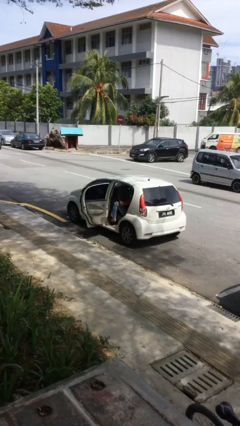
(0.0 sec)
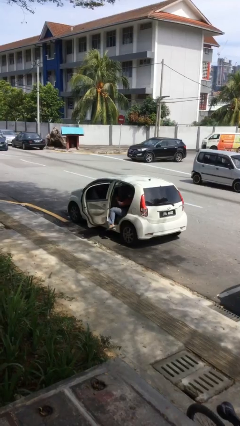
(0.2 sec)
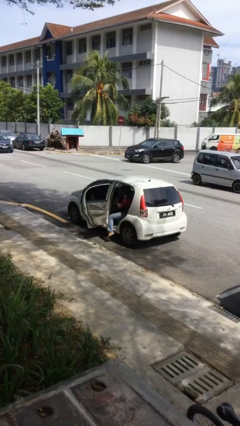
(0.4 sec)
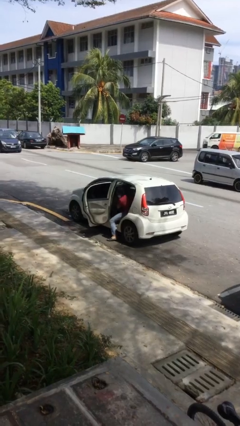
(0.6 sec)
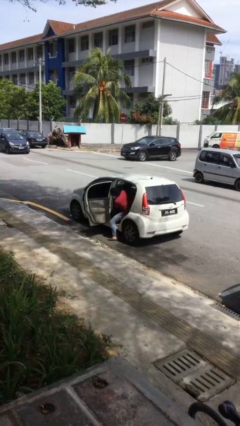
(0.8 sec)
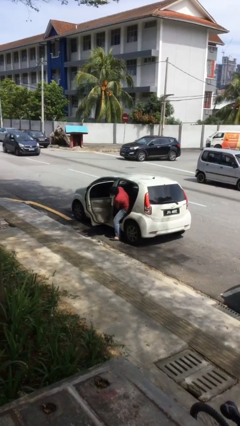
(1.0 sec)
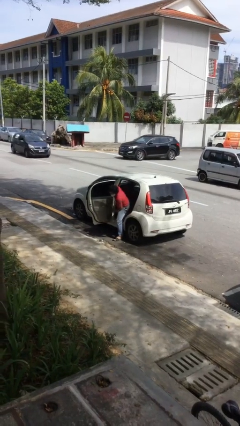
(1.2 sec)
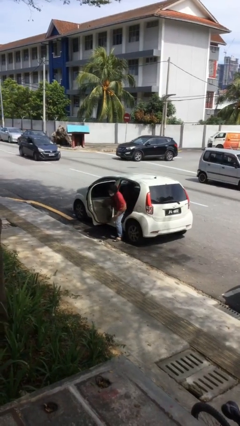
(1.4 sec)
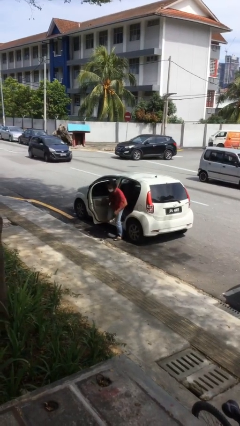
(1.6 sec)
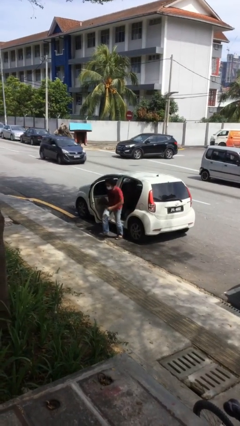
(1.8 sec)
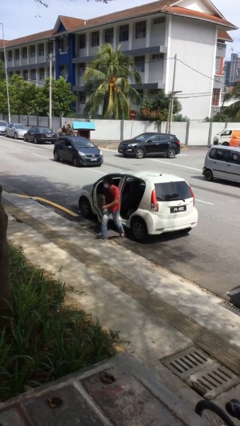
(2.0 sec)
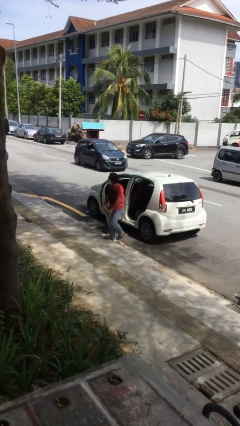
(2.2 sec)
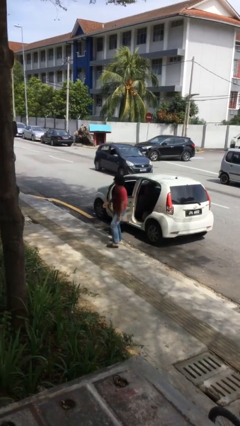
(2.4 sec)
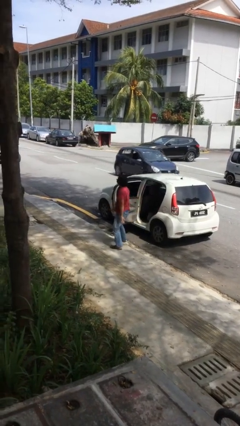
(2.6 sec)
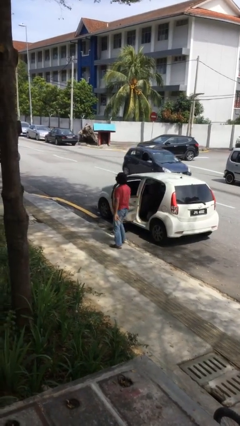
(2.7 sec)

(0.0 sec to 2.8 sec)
person exits car

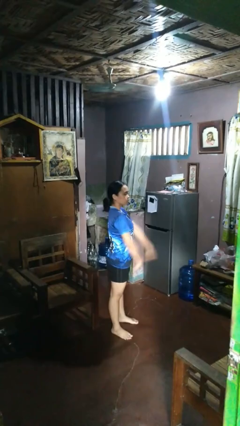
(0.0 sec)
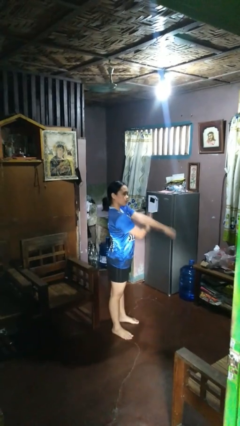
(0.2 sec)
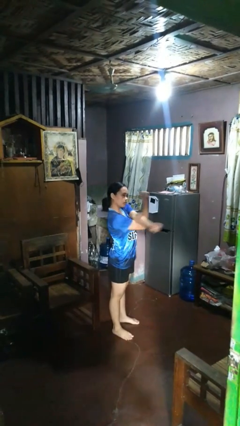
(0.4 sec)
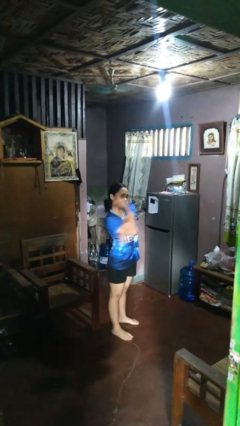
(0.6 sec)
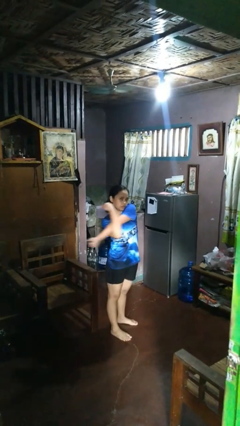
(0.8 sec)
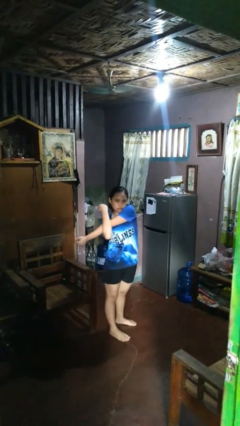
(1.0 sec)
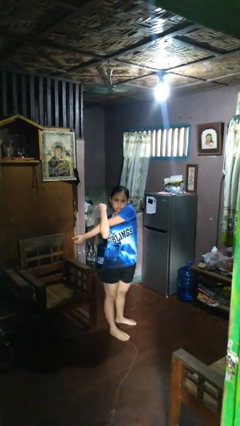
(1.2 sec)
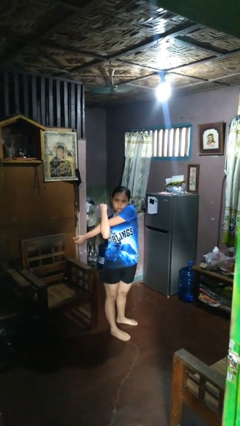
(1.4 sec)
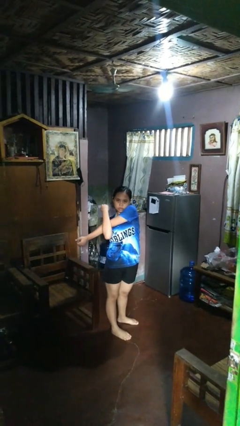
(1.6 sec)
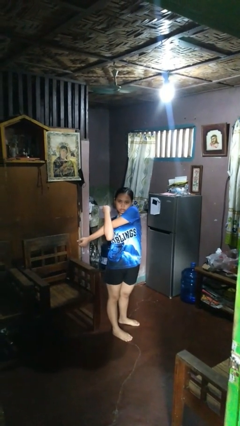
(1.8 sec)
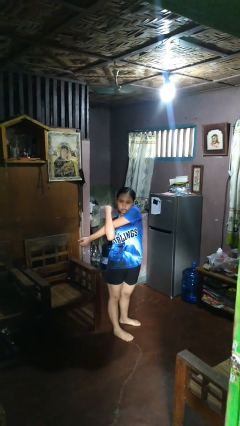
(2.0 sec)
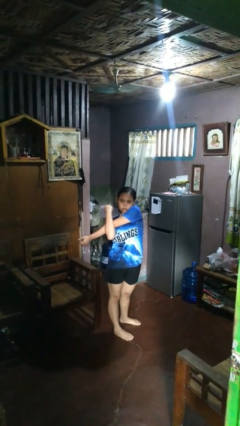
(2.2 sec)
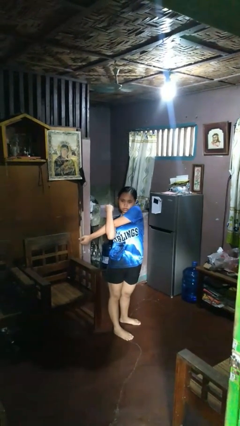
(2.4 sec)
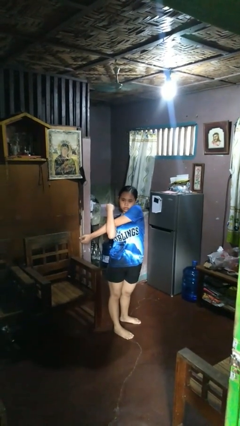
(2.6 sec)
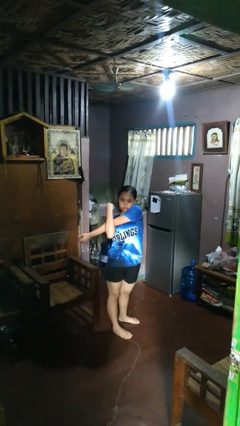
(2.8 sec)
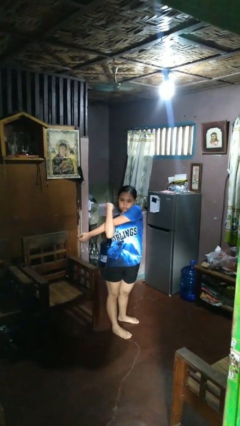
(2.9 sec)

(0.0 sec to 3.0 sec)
person stretches arms to side

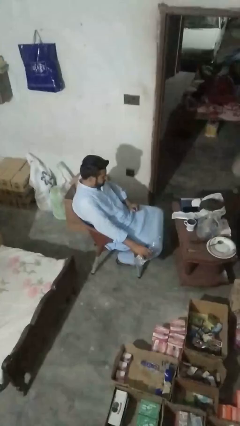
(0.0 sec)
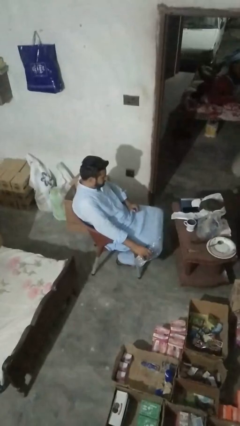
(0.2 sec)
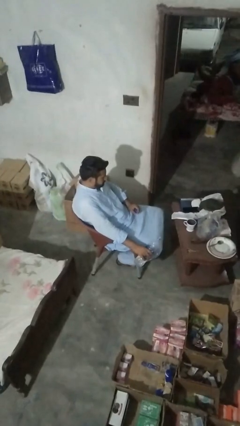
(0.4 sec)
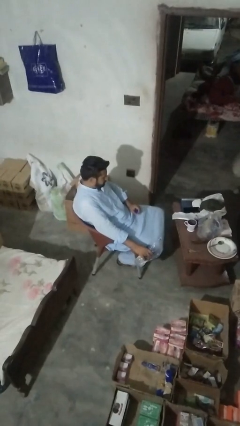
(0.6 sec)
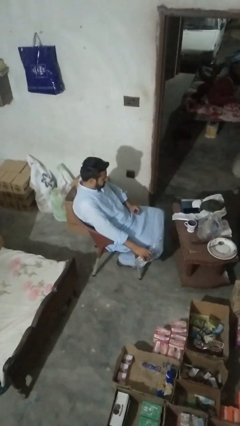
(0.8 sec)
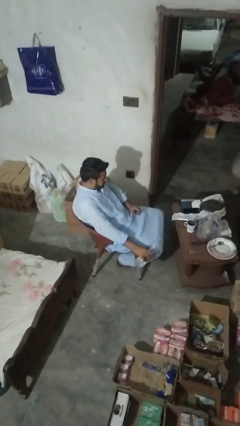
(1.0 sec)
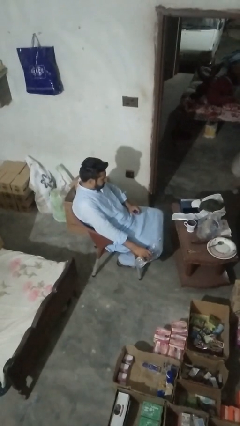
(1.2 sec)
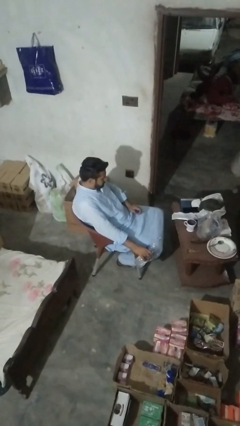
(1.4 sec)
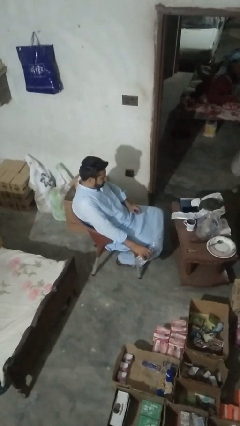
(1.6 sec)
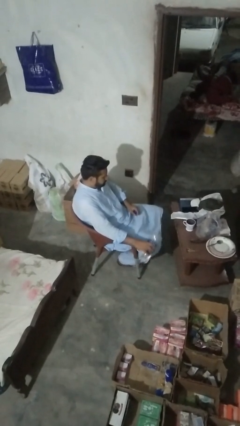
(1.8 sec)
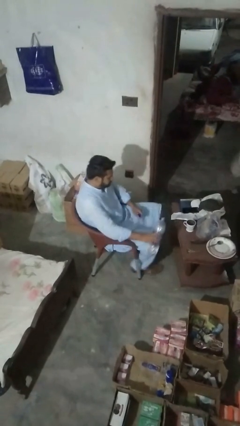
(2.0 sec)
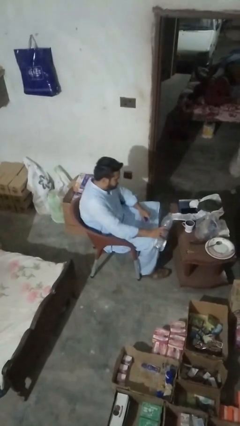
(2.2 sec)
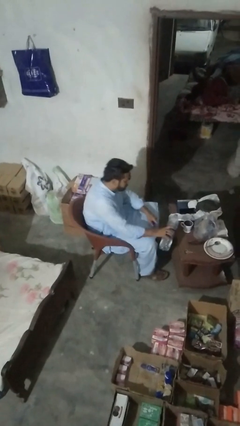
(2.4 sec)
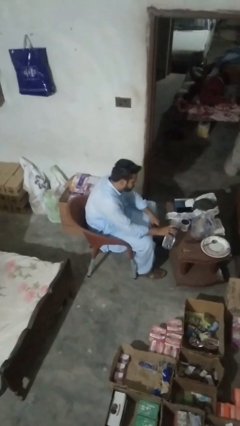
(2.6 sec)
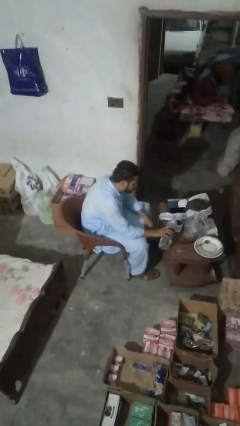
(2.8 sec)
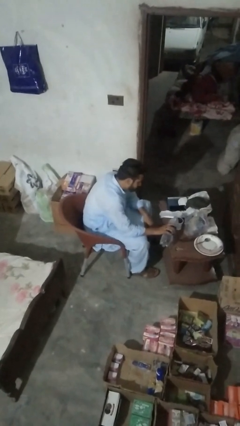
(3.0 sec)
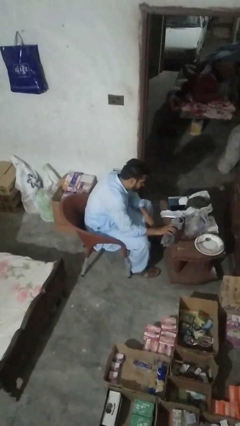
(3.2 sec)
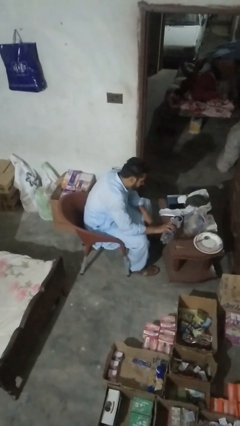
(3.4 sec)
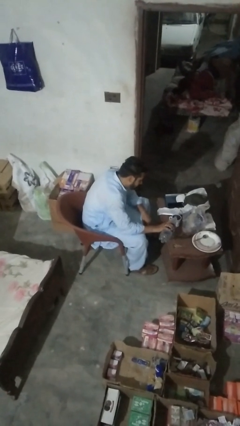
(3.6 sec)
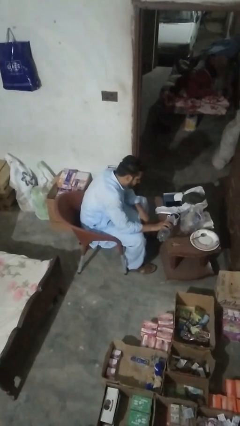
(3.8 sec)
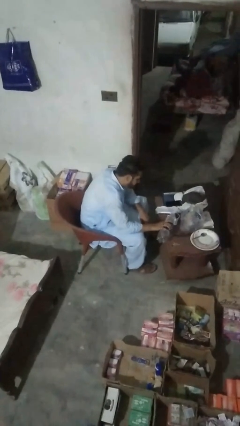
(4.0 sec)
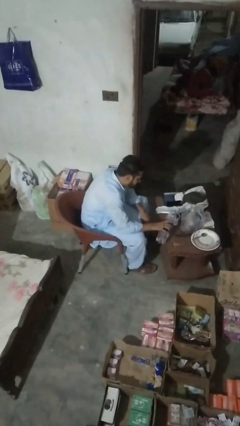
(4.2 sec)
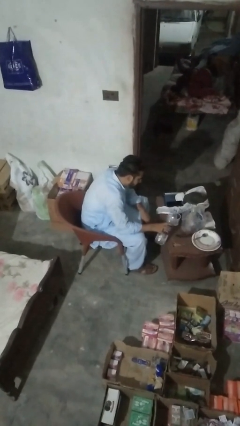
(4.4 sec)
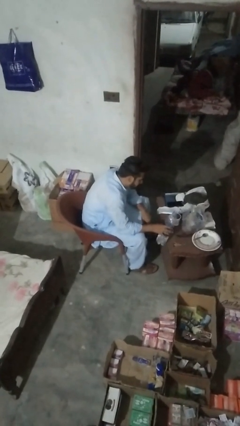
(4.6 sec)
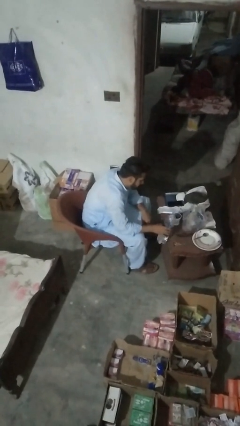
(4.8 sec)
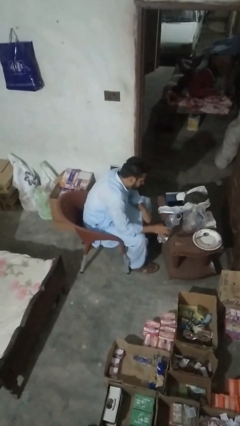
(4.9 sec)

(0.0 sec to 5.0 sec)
person pours liquid into cup

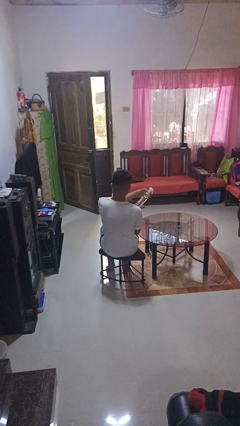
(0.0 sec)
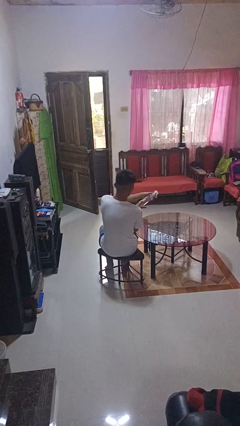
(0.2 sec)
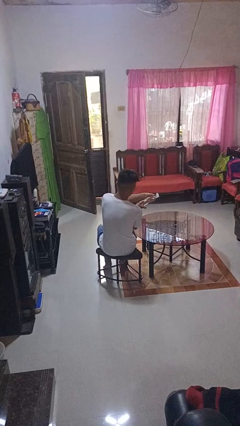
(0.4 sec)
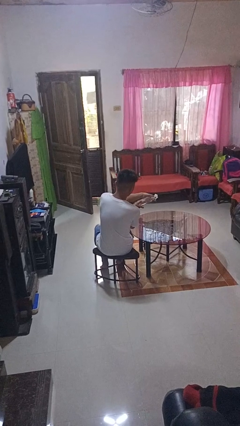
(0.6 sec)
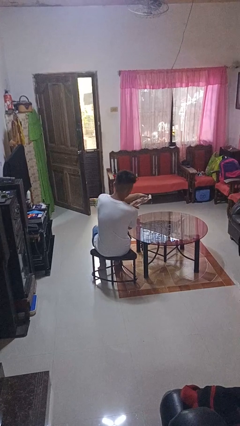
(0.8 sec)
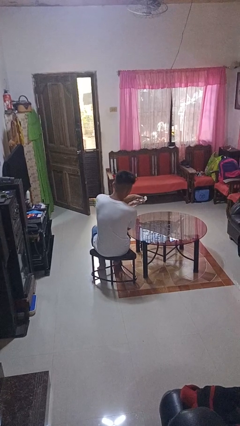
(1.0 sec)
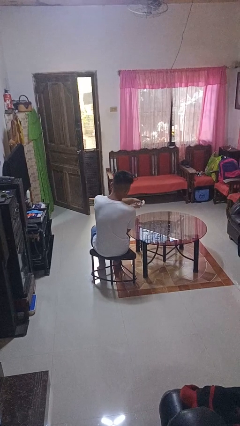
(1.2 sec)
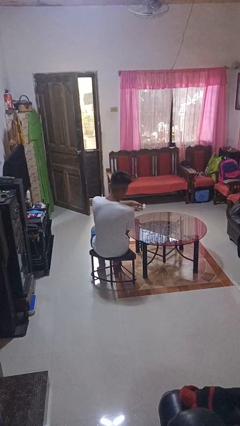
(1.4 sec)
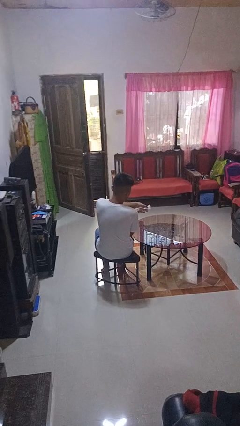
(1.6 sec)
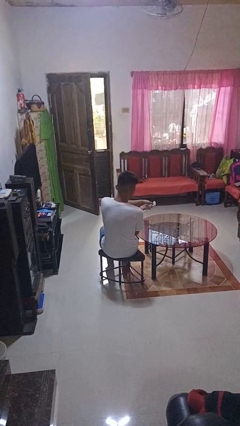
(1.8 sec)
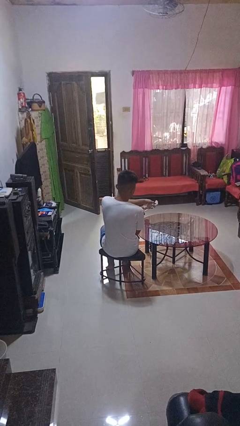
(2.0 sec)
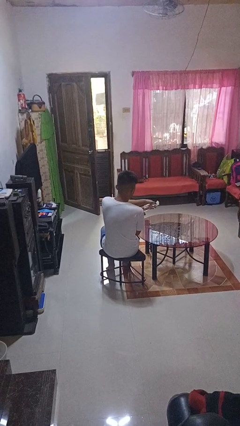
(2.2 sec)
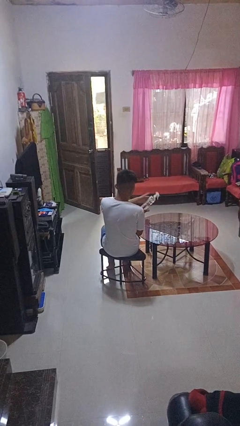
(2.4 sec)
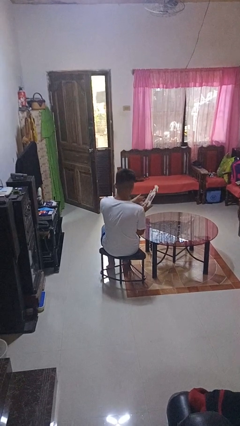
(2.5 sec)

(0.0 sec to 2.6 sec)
person sprays from bottle

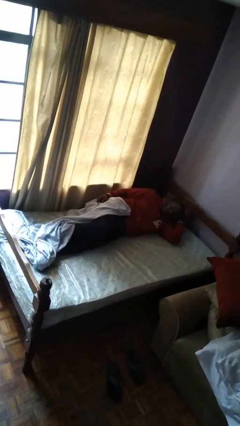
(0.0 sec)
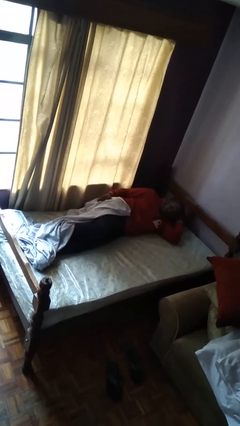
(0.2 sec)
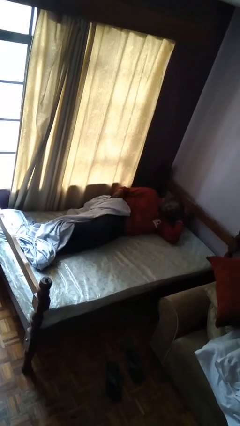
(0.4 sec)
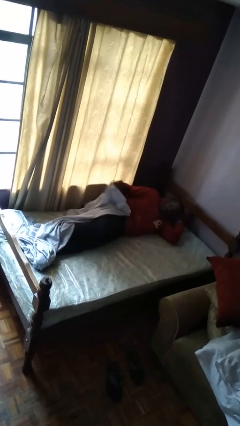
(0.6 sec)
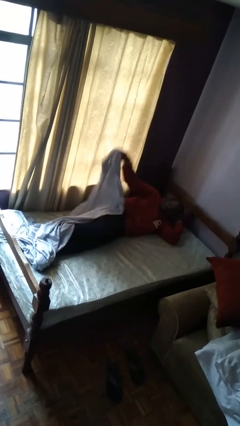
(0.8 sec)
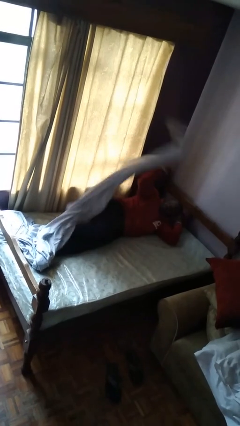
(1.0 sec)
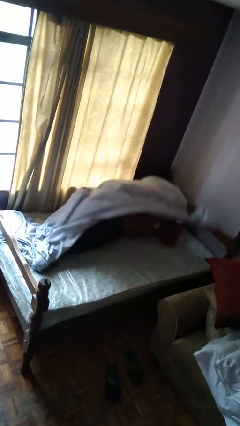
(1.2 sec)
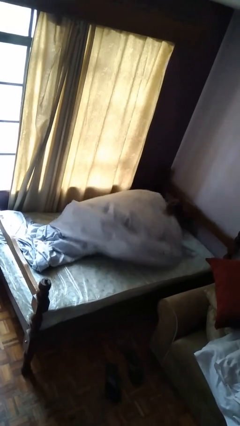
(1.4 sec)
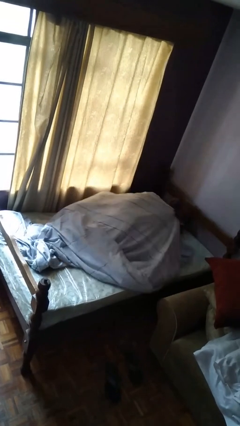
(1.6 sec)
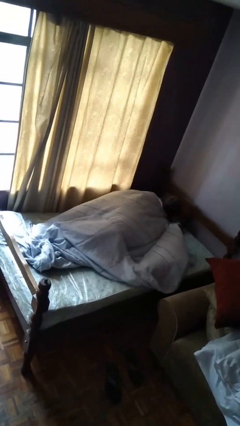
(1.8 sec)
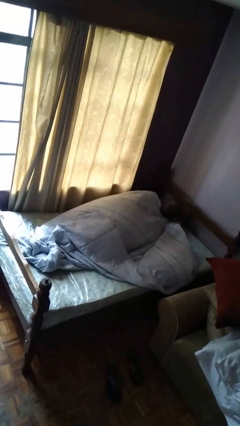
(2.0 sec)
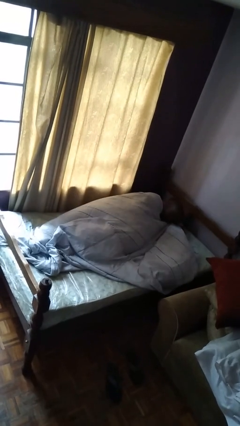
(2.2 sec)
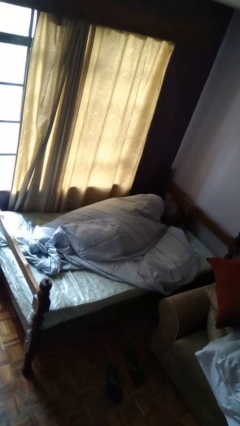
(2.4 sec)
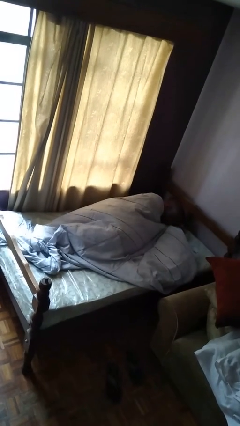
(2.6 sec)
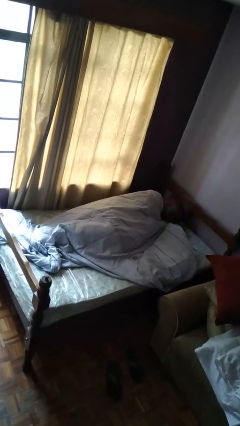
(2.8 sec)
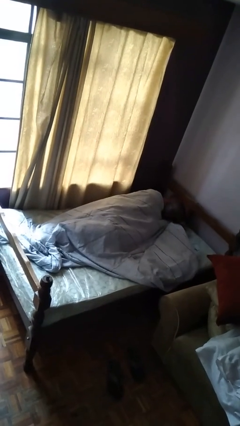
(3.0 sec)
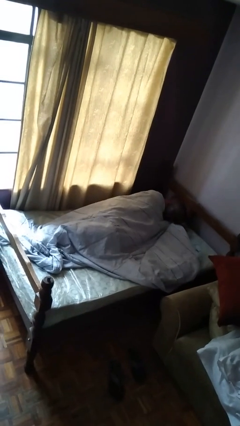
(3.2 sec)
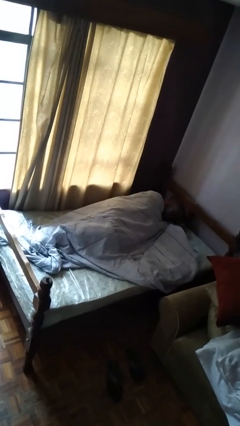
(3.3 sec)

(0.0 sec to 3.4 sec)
person covers with bedsheets

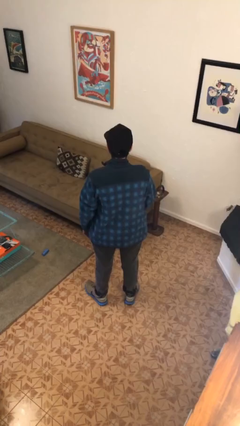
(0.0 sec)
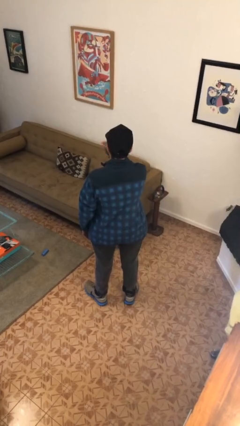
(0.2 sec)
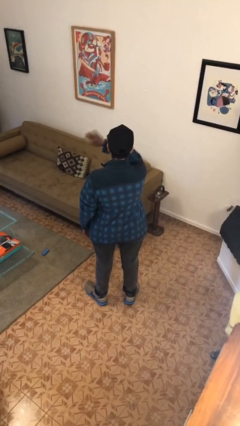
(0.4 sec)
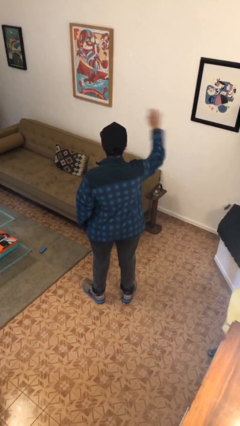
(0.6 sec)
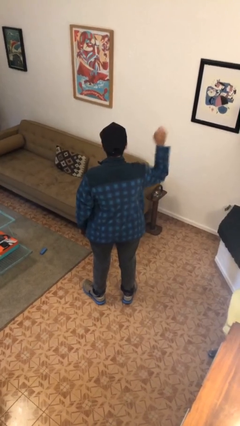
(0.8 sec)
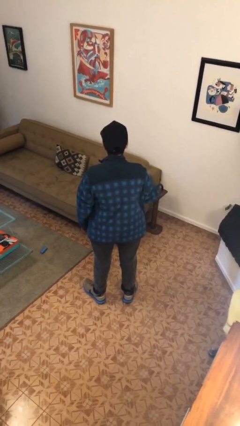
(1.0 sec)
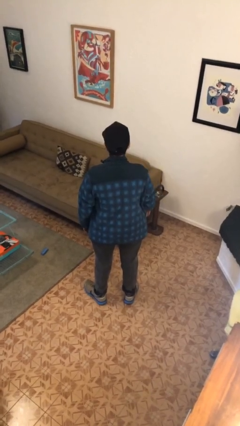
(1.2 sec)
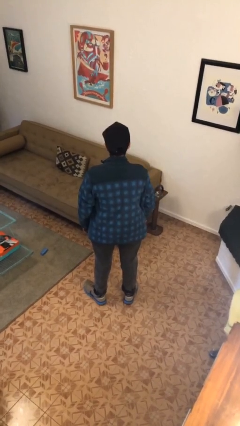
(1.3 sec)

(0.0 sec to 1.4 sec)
person gestures swipe right
